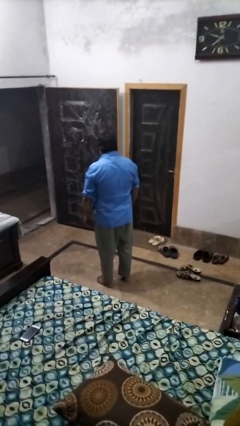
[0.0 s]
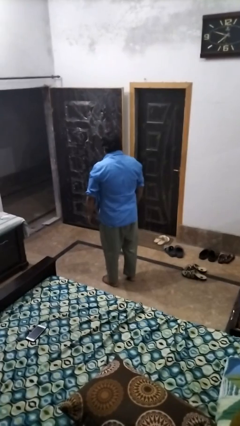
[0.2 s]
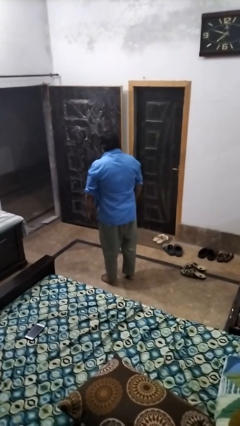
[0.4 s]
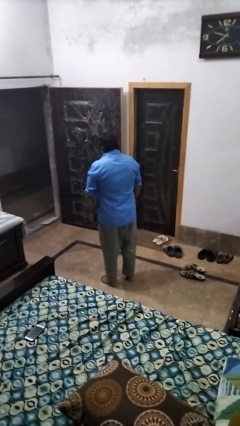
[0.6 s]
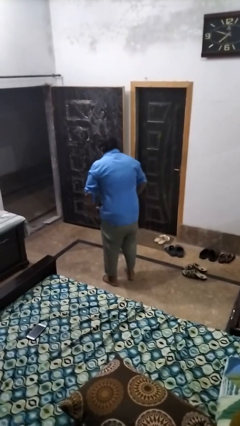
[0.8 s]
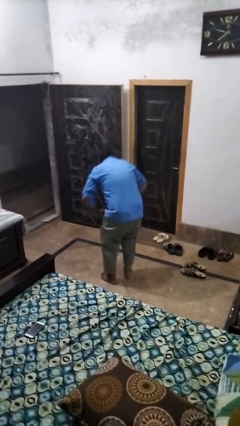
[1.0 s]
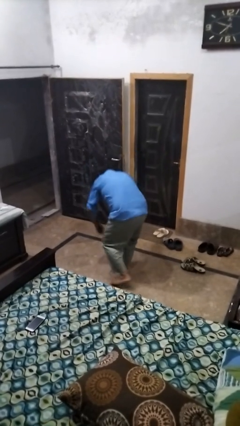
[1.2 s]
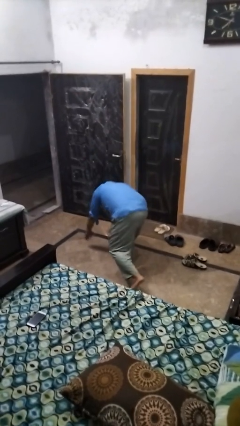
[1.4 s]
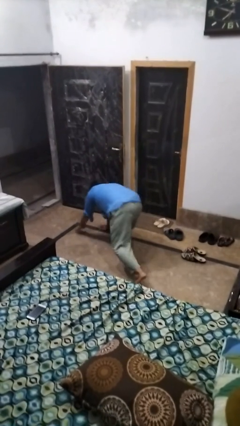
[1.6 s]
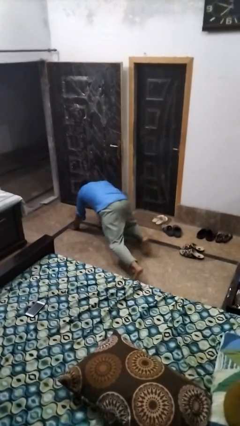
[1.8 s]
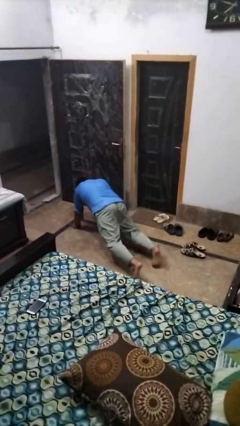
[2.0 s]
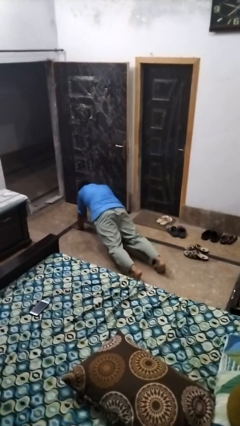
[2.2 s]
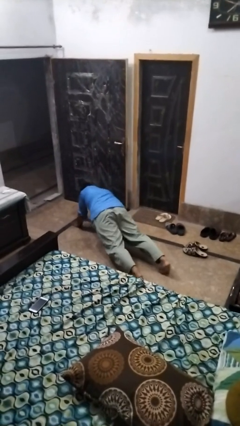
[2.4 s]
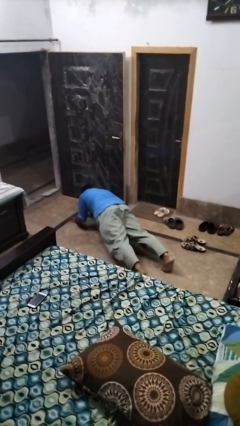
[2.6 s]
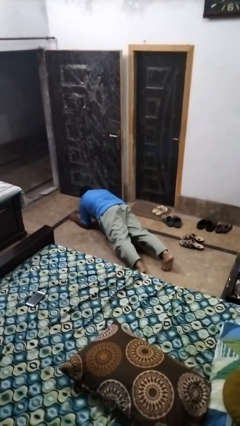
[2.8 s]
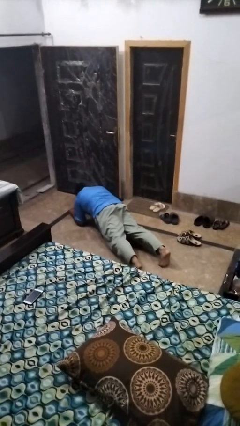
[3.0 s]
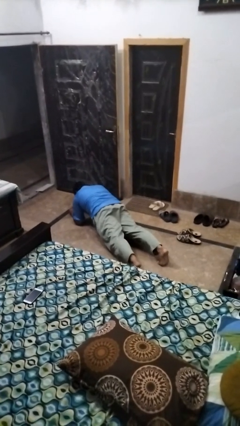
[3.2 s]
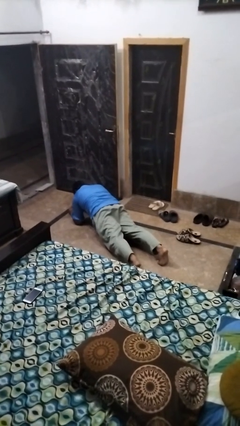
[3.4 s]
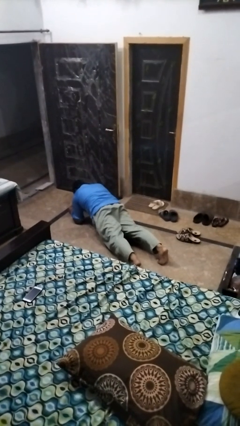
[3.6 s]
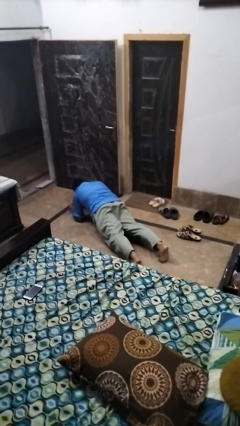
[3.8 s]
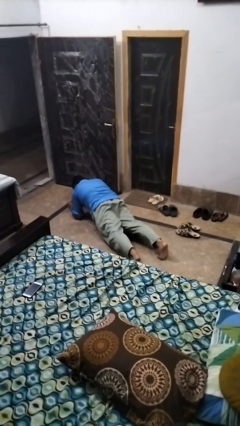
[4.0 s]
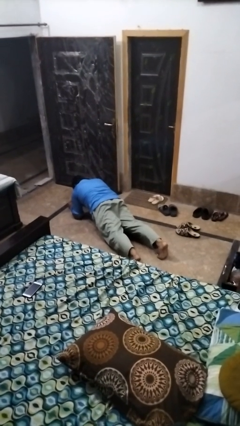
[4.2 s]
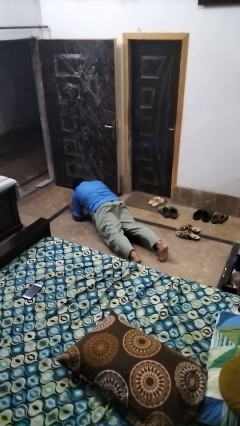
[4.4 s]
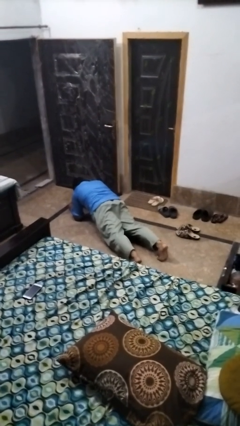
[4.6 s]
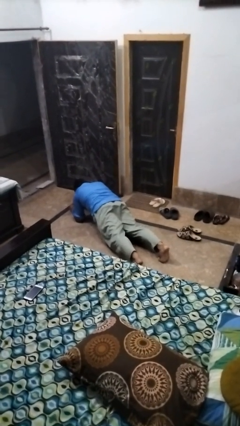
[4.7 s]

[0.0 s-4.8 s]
person exercises with plank

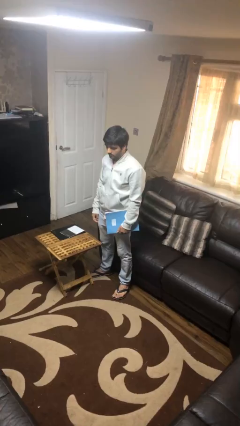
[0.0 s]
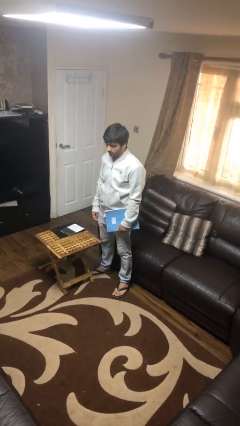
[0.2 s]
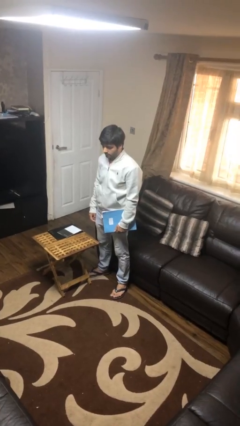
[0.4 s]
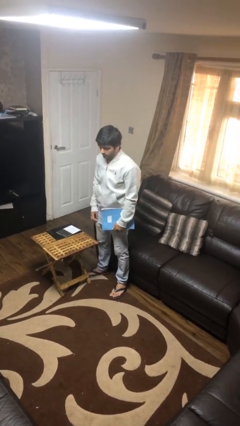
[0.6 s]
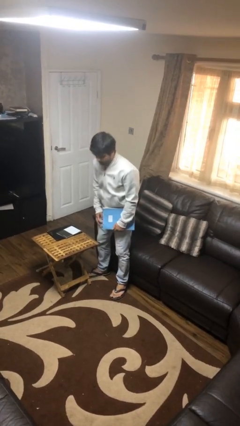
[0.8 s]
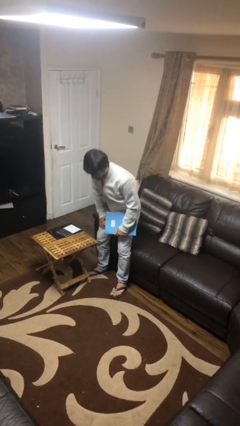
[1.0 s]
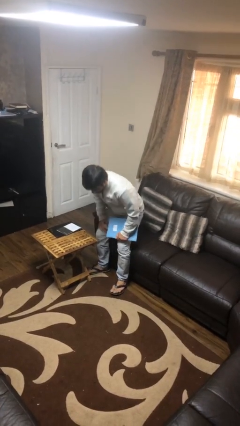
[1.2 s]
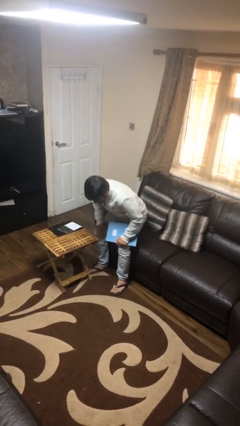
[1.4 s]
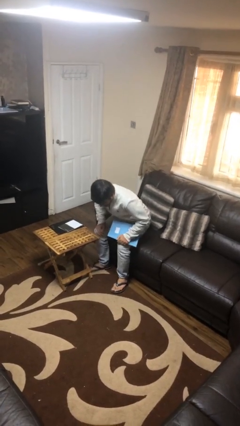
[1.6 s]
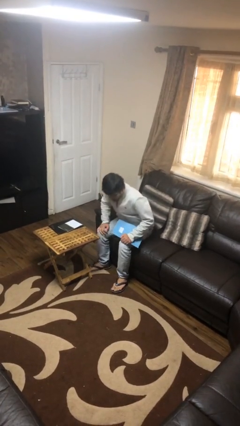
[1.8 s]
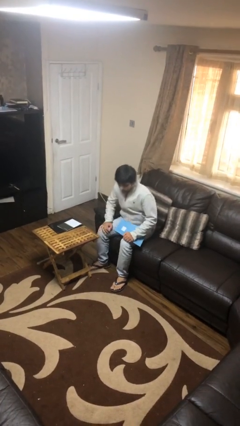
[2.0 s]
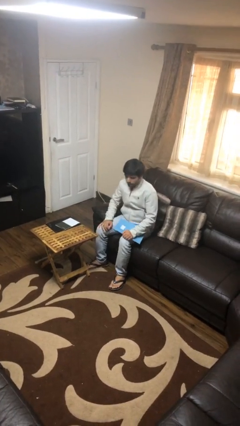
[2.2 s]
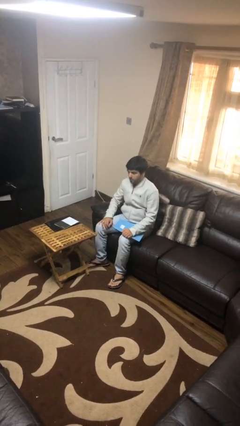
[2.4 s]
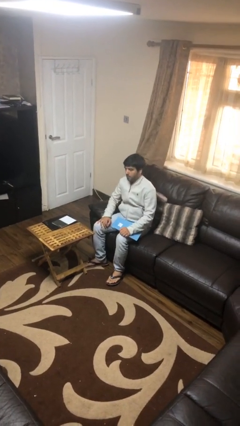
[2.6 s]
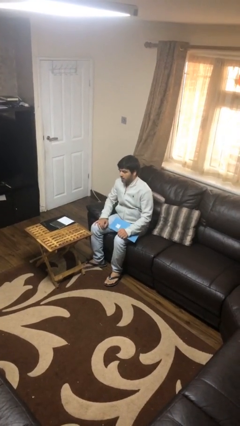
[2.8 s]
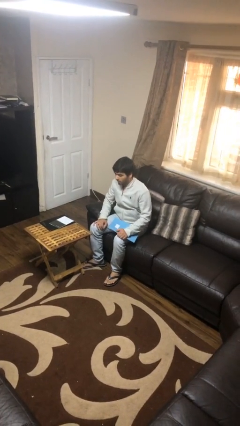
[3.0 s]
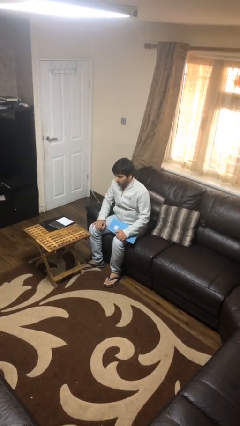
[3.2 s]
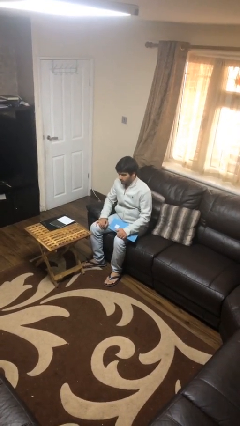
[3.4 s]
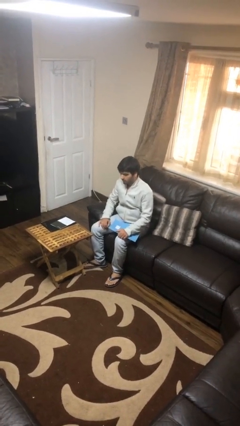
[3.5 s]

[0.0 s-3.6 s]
person sits down

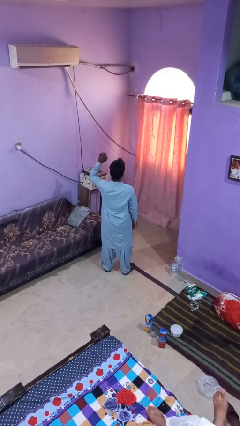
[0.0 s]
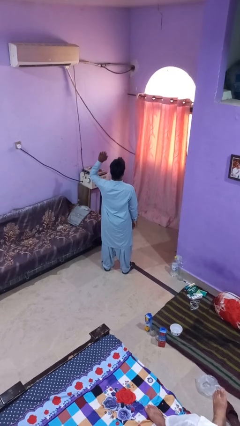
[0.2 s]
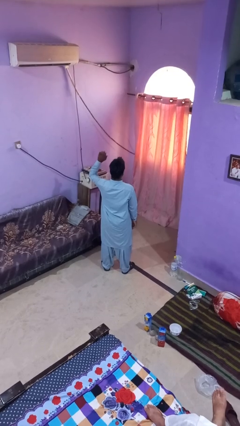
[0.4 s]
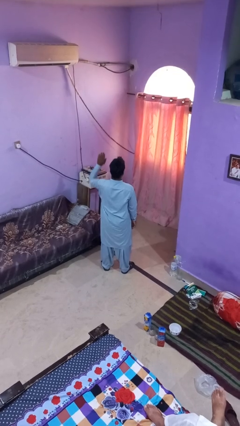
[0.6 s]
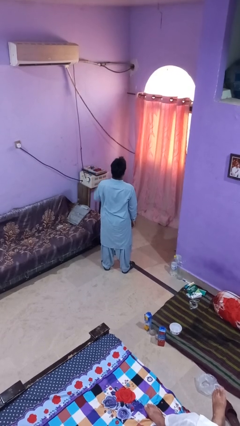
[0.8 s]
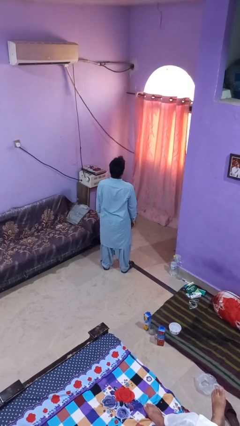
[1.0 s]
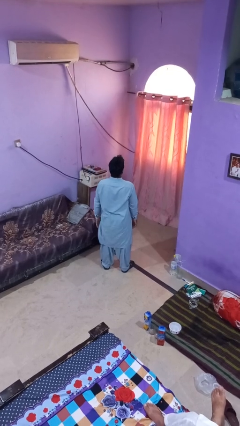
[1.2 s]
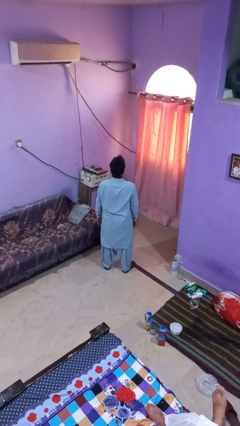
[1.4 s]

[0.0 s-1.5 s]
person gestures lower hand

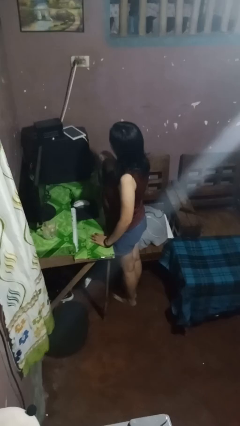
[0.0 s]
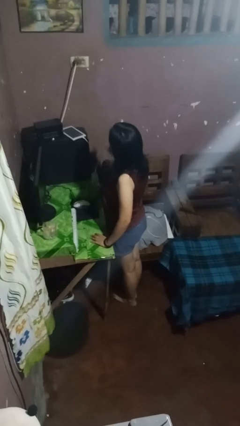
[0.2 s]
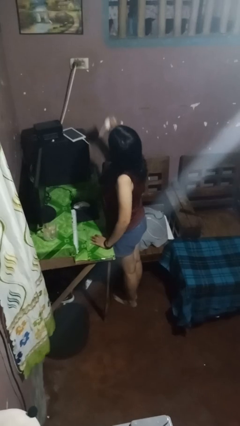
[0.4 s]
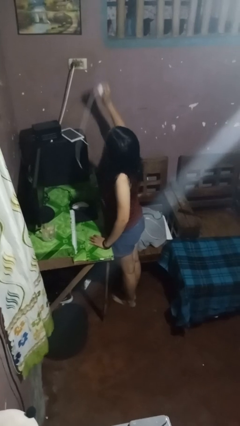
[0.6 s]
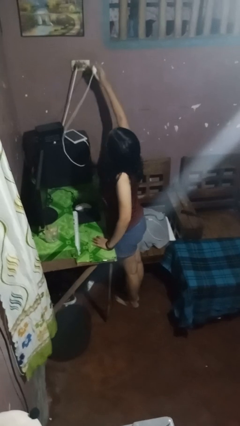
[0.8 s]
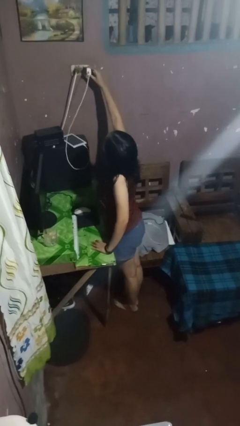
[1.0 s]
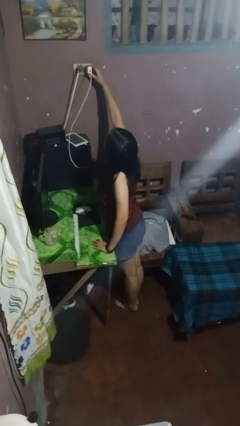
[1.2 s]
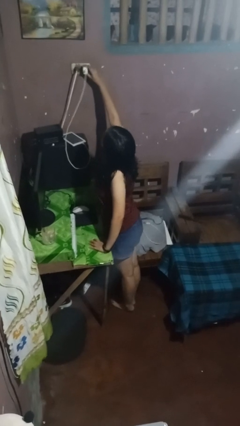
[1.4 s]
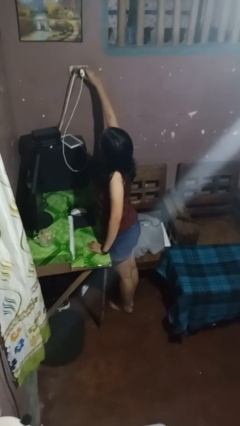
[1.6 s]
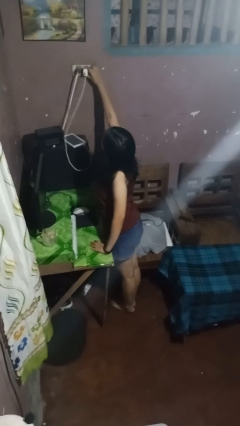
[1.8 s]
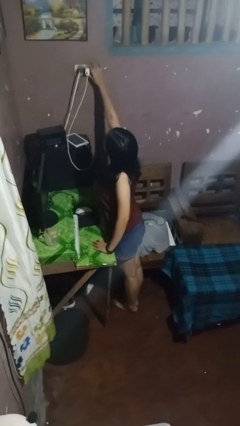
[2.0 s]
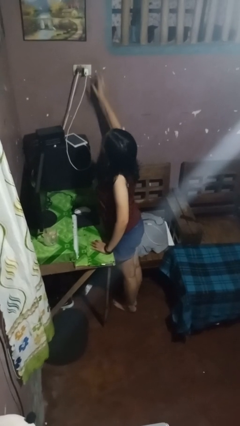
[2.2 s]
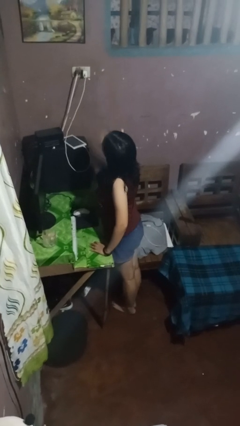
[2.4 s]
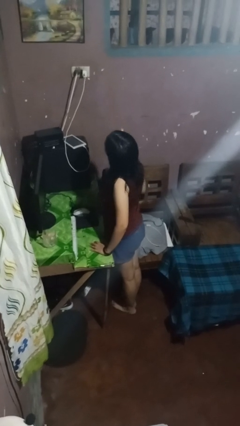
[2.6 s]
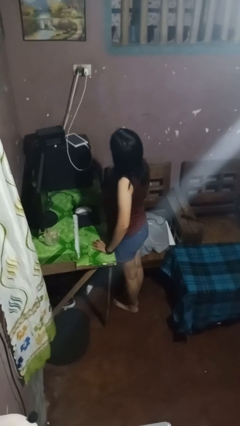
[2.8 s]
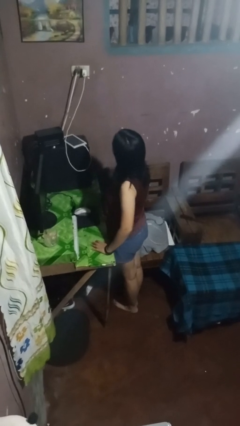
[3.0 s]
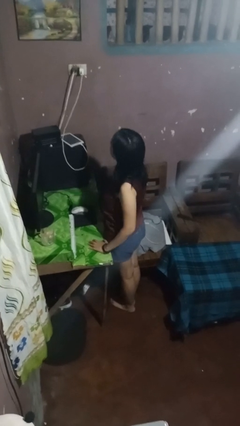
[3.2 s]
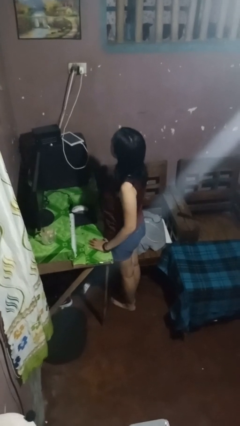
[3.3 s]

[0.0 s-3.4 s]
person plugs into electrical socket

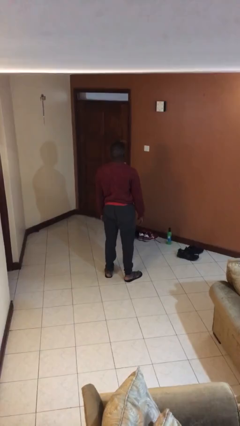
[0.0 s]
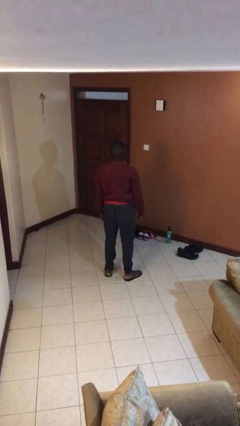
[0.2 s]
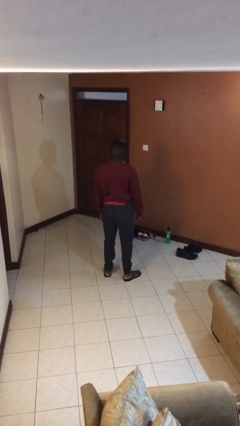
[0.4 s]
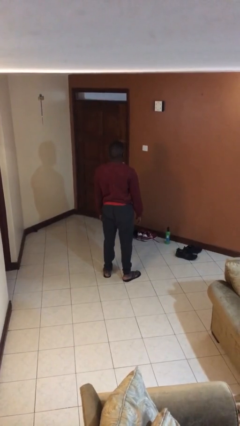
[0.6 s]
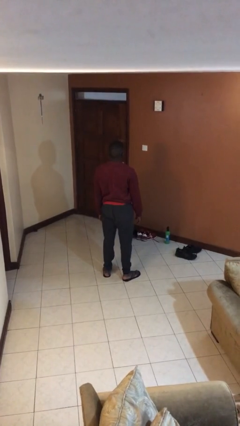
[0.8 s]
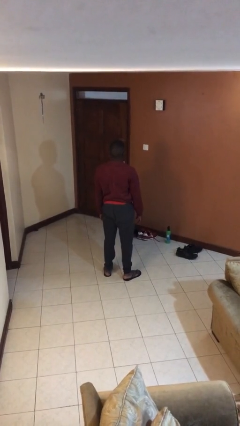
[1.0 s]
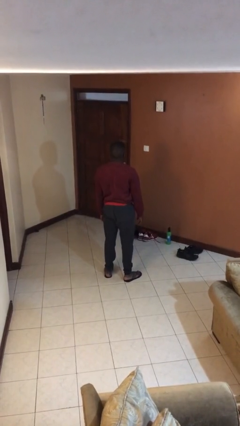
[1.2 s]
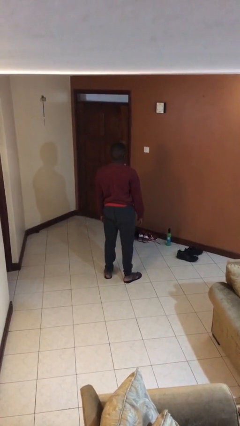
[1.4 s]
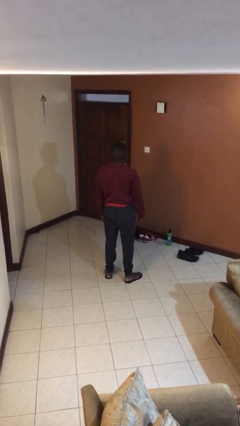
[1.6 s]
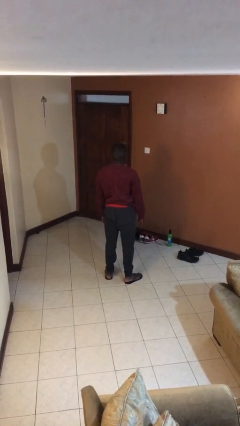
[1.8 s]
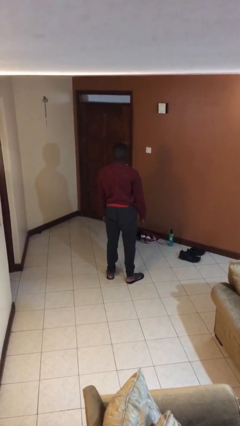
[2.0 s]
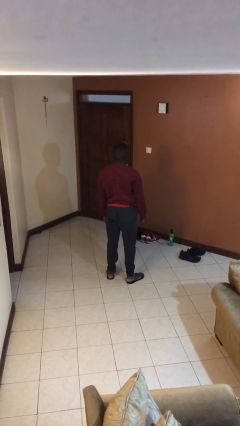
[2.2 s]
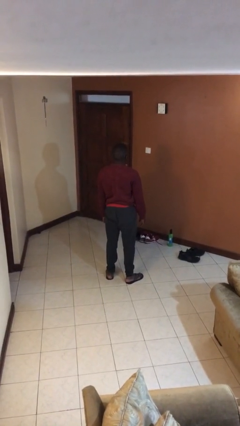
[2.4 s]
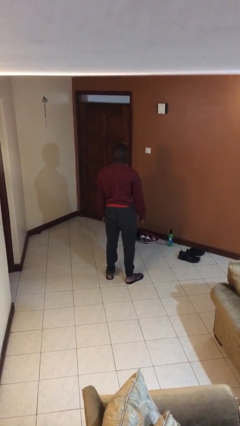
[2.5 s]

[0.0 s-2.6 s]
person gestures swipe down

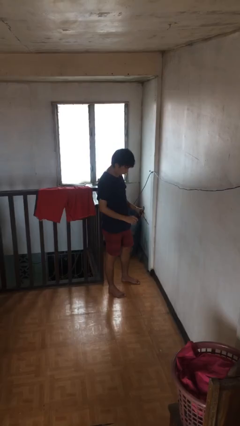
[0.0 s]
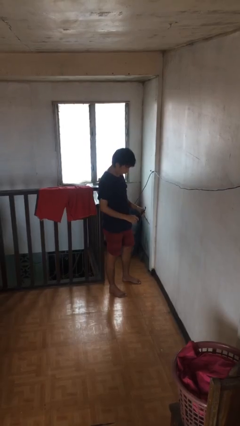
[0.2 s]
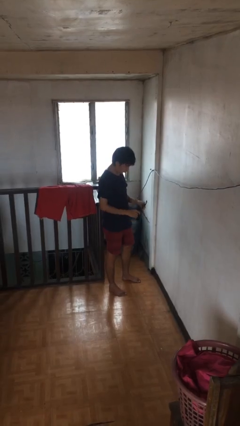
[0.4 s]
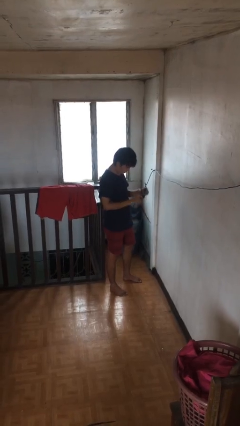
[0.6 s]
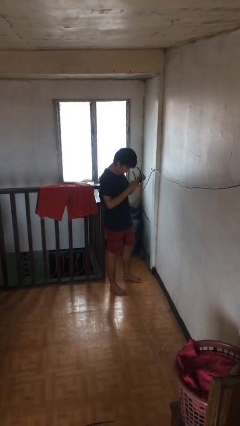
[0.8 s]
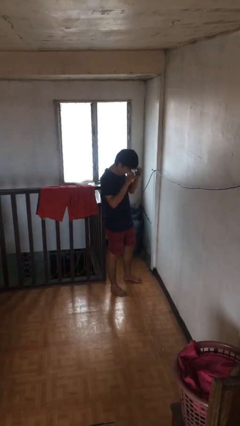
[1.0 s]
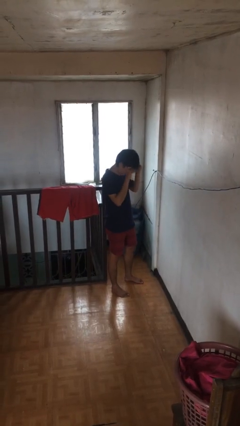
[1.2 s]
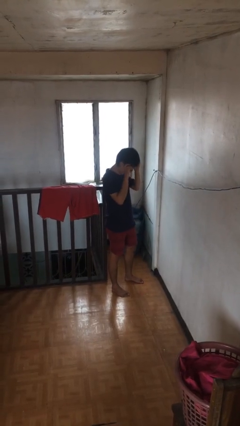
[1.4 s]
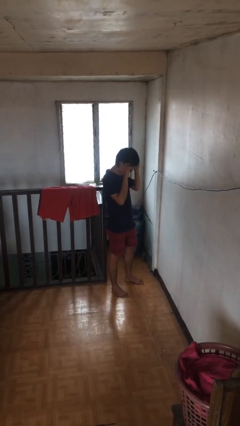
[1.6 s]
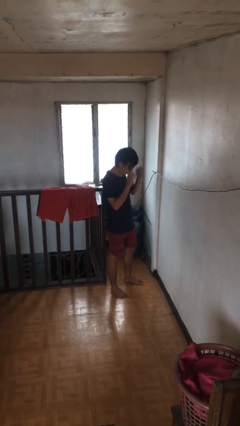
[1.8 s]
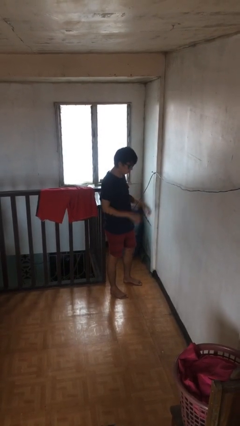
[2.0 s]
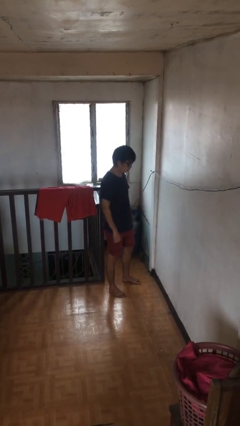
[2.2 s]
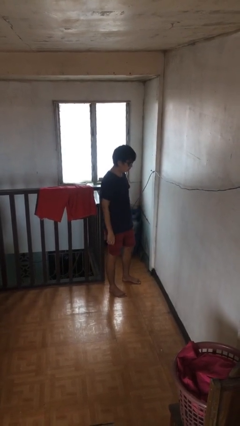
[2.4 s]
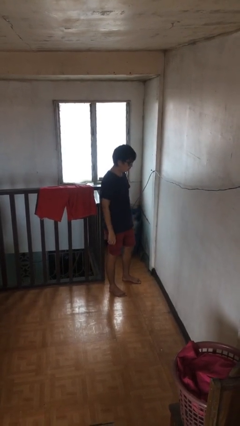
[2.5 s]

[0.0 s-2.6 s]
person puts on sunglasses
